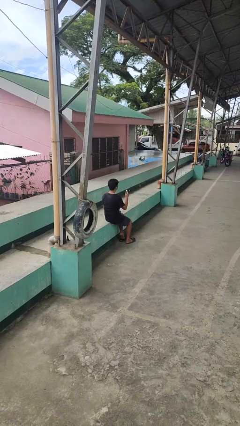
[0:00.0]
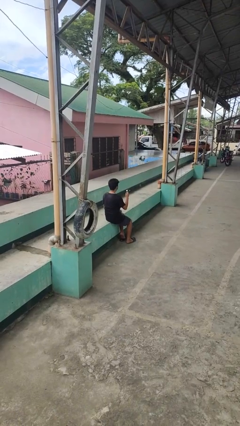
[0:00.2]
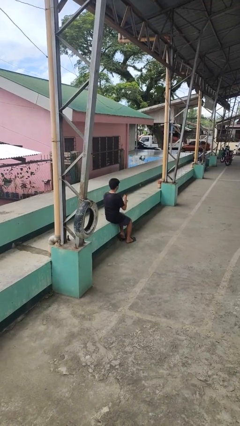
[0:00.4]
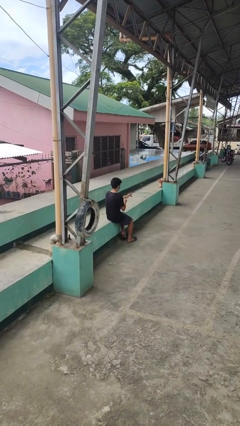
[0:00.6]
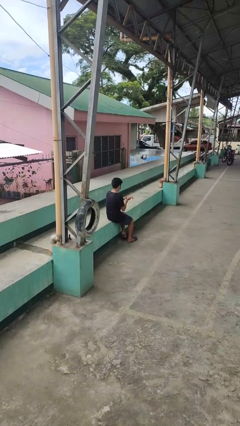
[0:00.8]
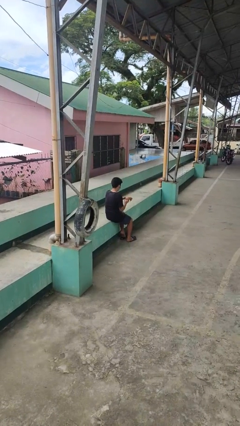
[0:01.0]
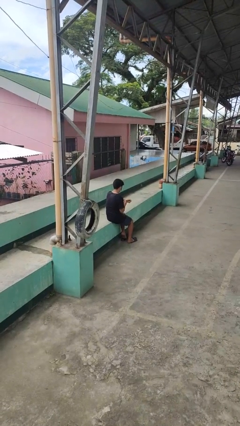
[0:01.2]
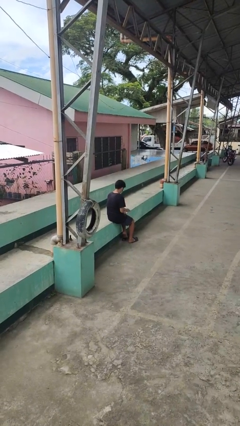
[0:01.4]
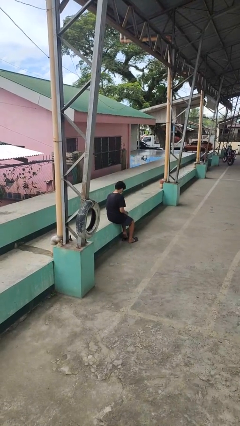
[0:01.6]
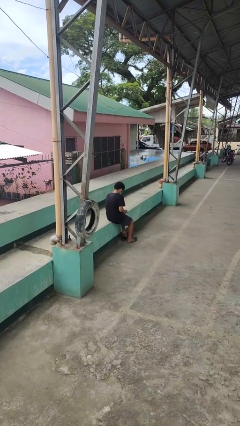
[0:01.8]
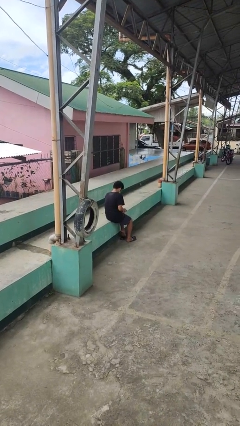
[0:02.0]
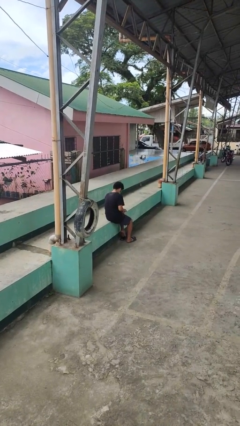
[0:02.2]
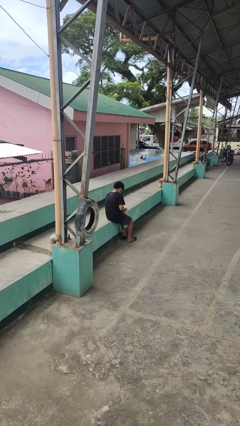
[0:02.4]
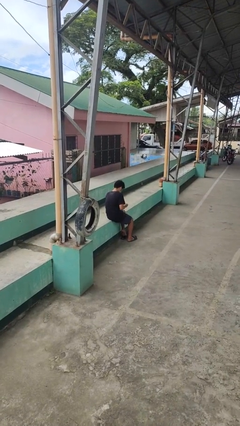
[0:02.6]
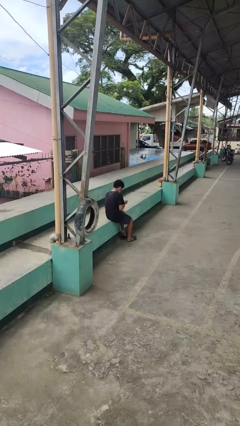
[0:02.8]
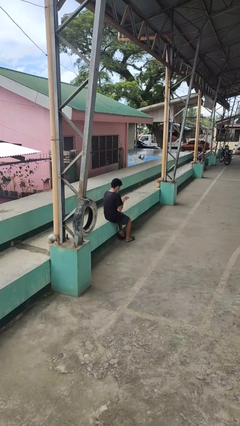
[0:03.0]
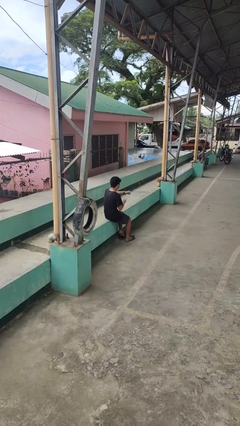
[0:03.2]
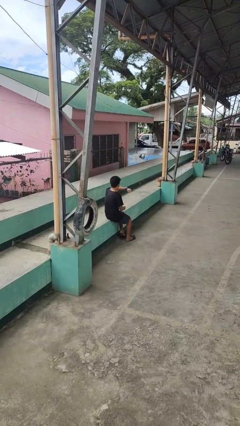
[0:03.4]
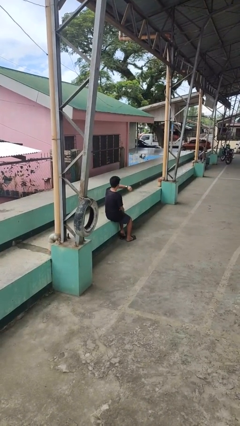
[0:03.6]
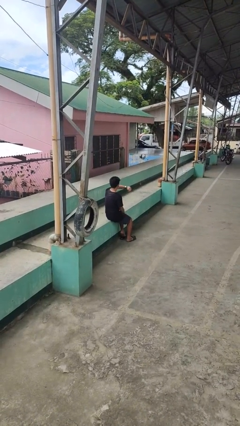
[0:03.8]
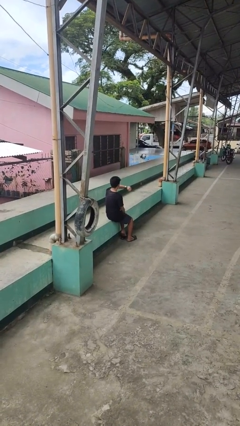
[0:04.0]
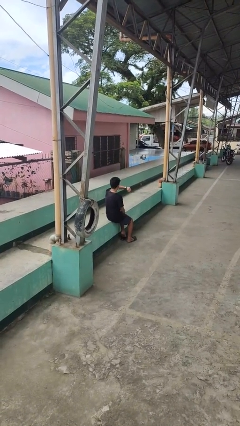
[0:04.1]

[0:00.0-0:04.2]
person puts on wristwatch

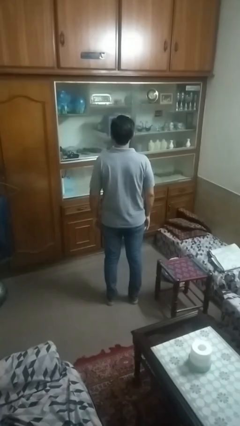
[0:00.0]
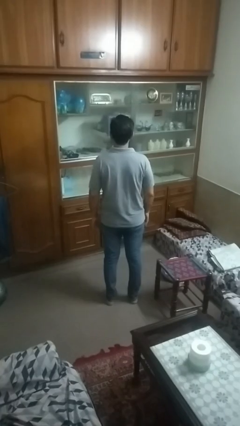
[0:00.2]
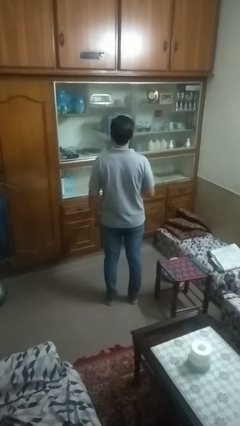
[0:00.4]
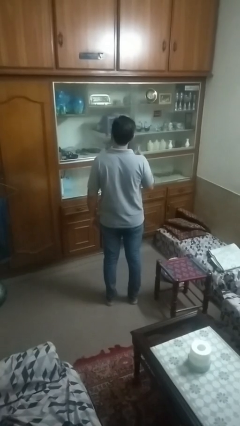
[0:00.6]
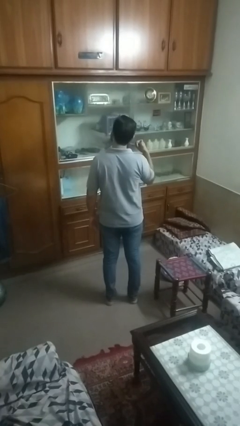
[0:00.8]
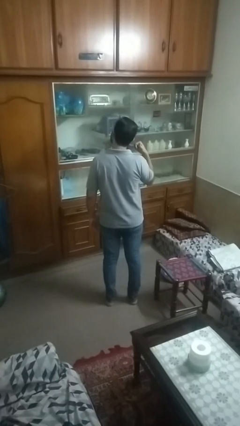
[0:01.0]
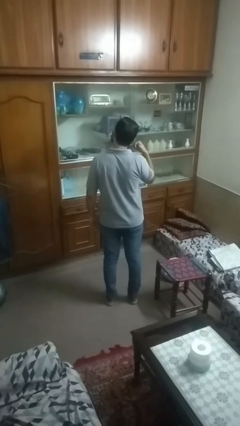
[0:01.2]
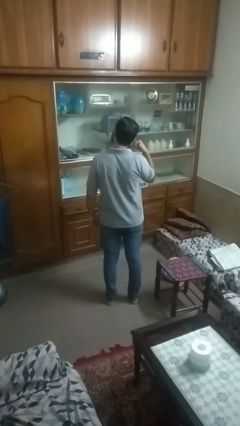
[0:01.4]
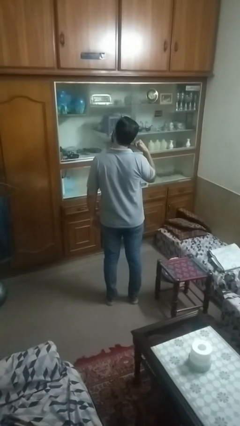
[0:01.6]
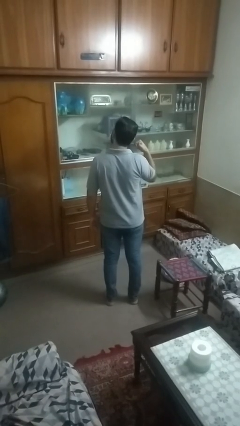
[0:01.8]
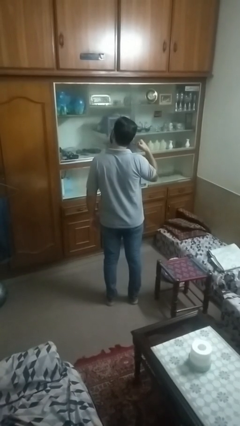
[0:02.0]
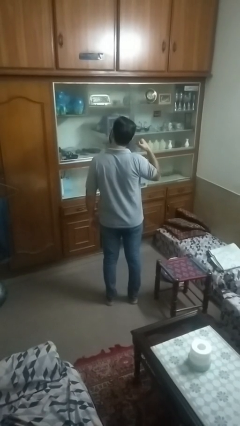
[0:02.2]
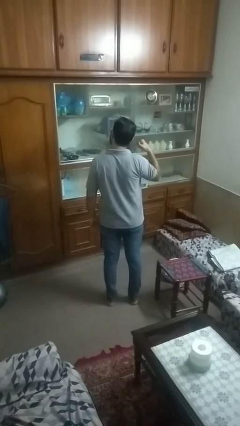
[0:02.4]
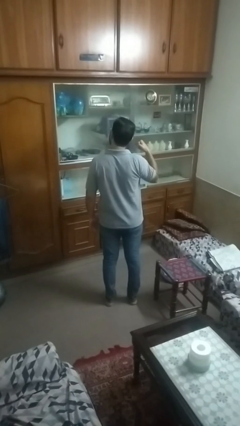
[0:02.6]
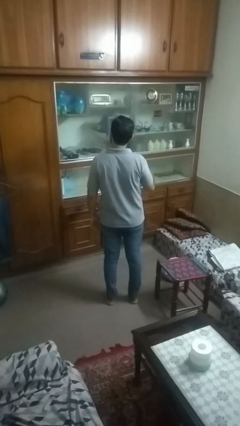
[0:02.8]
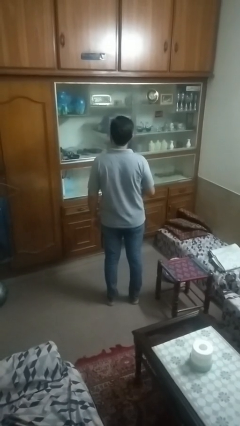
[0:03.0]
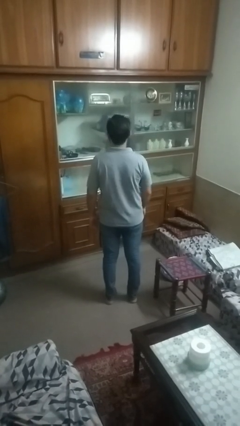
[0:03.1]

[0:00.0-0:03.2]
person gestures call me

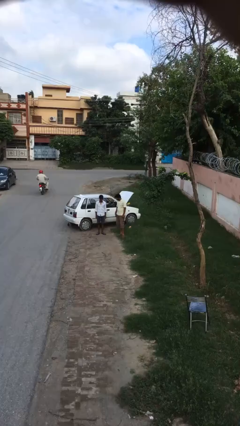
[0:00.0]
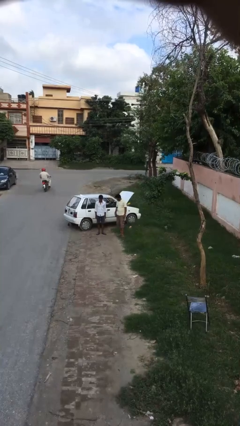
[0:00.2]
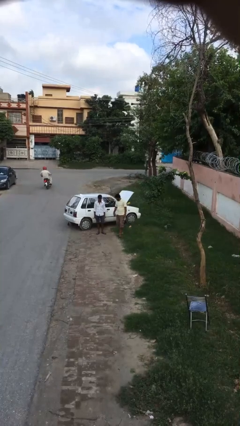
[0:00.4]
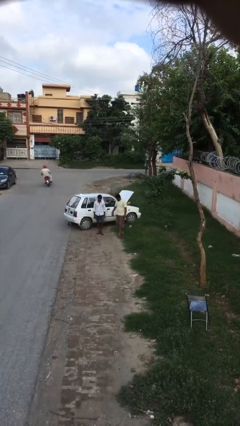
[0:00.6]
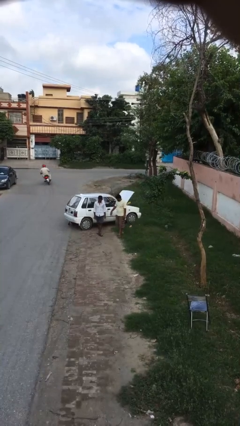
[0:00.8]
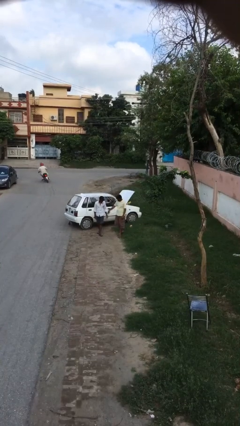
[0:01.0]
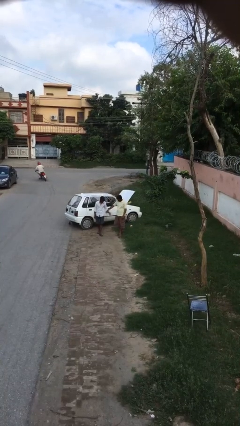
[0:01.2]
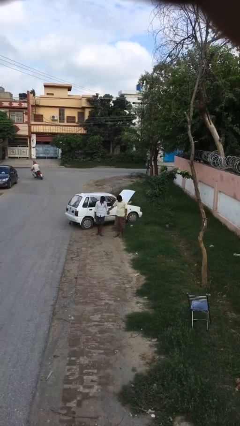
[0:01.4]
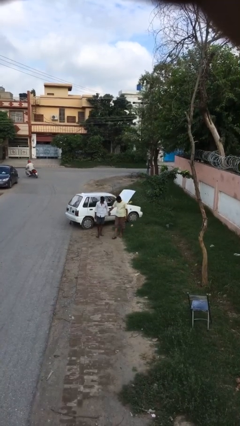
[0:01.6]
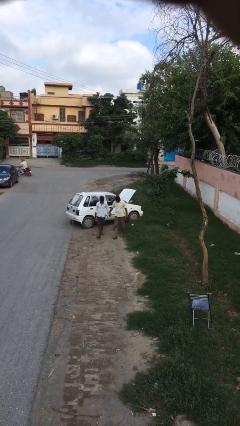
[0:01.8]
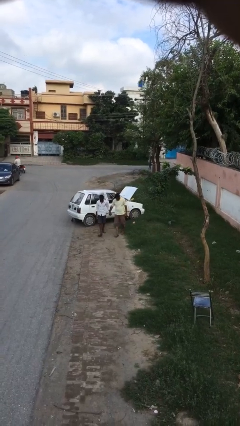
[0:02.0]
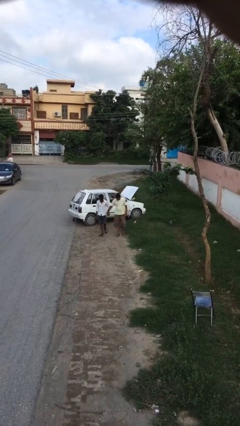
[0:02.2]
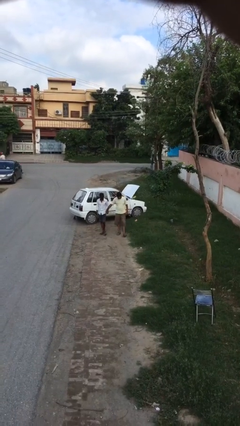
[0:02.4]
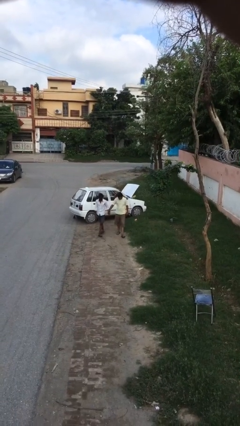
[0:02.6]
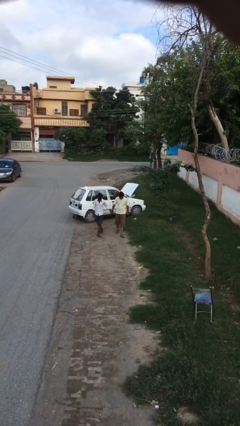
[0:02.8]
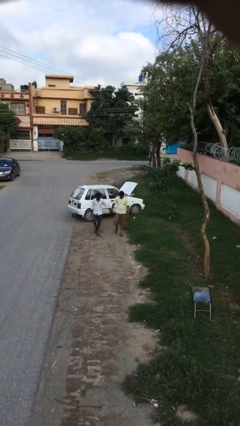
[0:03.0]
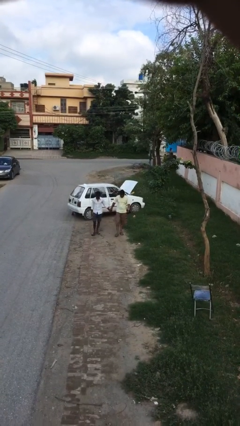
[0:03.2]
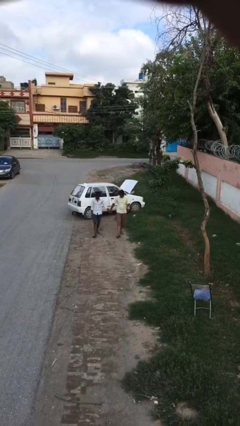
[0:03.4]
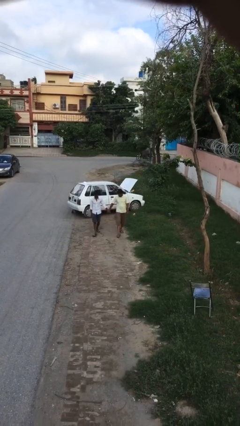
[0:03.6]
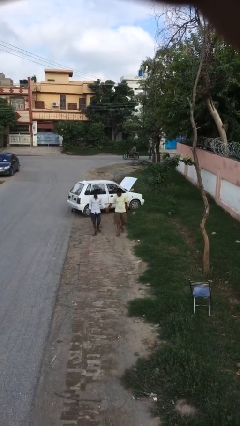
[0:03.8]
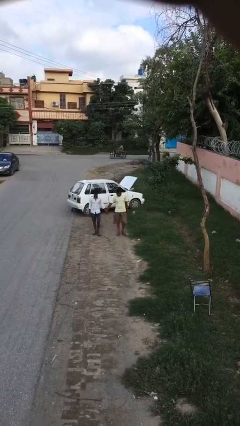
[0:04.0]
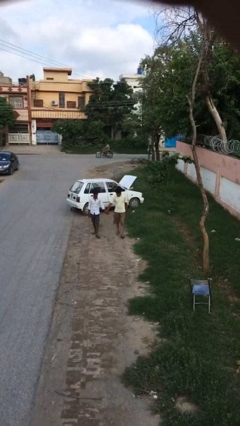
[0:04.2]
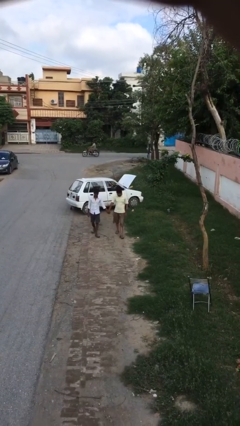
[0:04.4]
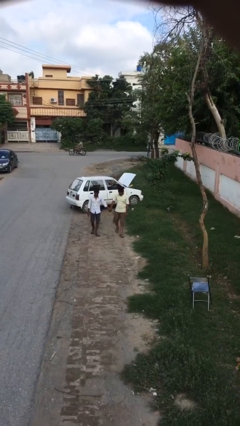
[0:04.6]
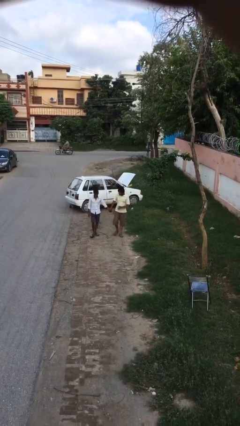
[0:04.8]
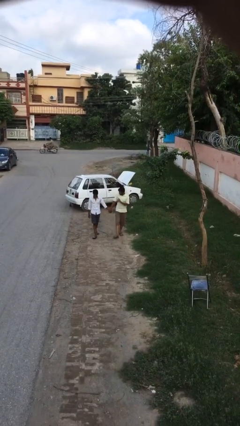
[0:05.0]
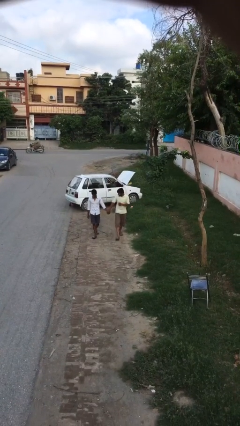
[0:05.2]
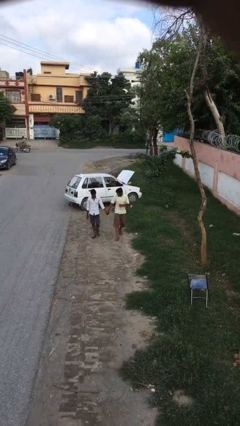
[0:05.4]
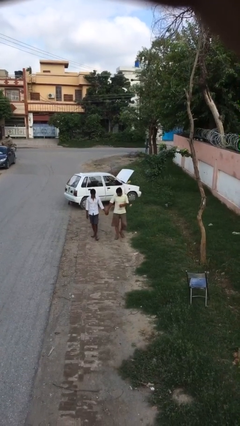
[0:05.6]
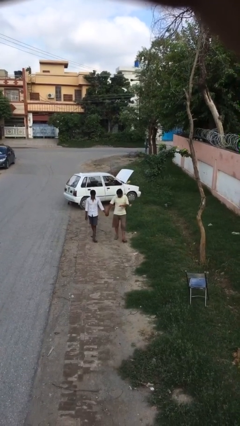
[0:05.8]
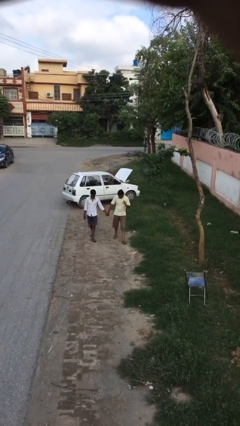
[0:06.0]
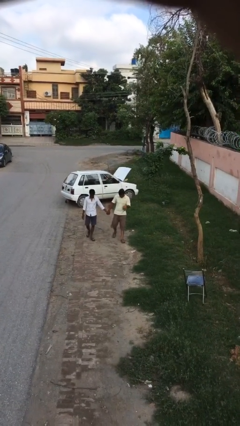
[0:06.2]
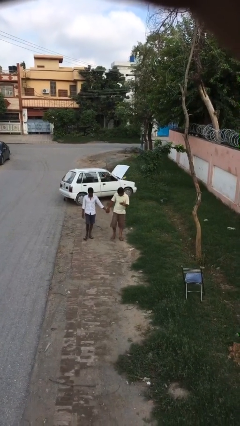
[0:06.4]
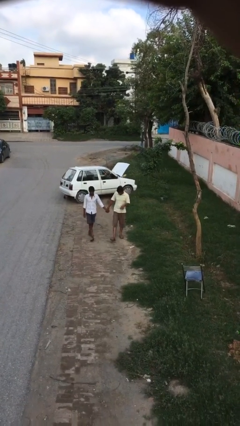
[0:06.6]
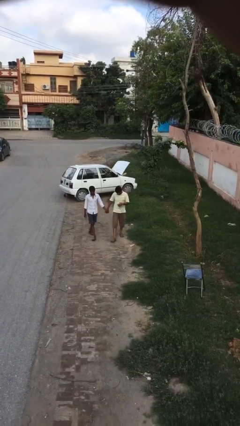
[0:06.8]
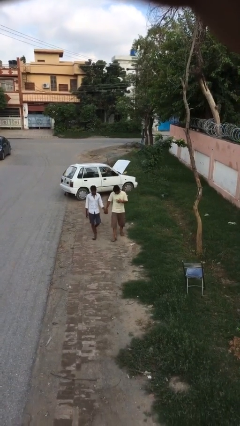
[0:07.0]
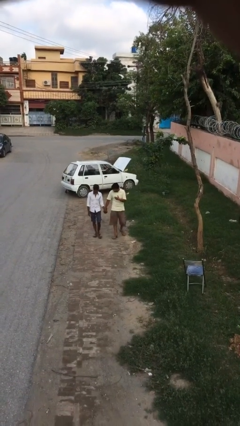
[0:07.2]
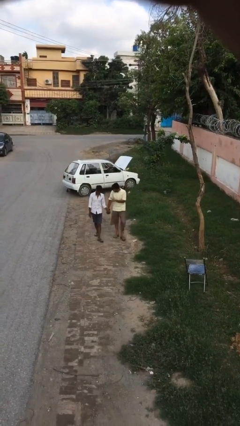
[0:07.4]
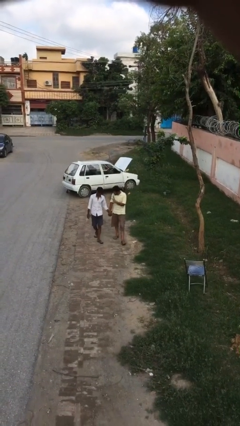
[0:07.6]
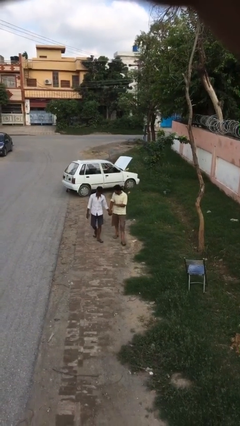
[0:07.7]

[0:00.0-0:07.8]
person holds hand

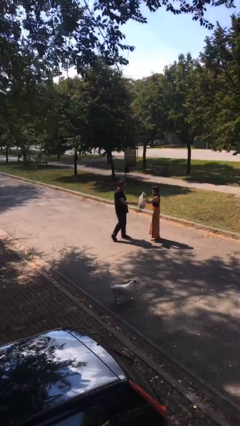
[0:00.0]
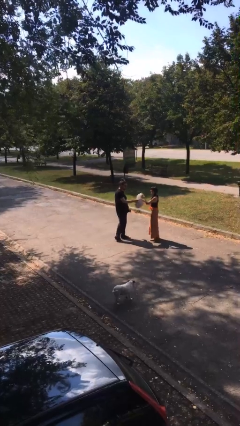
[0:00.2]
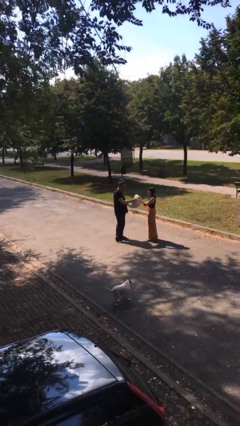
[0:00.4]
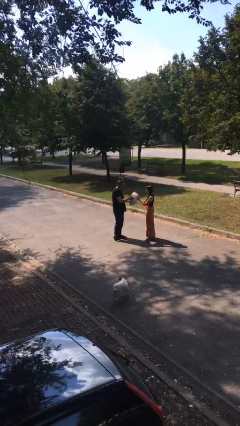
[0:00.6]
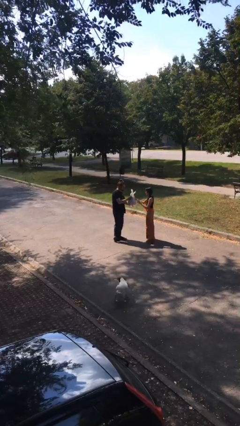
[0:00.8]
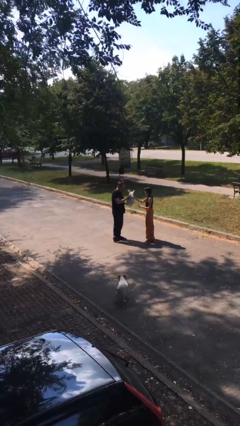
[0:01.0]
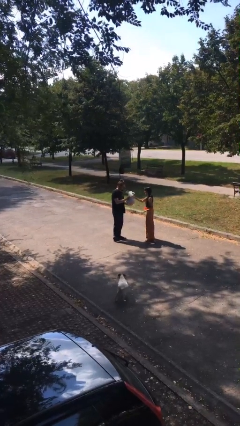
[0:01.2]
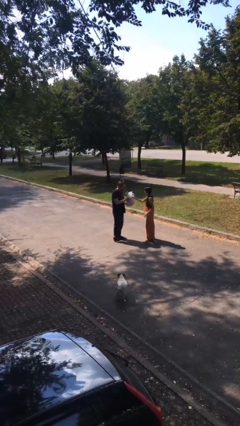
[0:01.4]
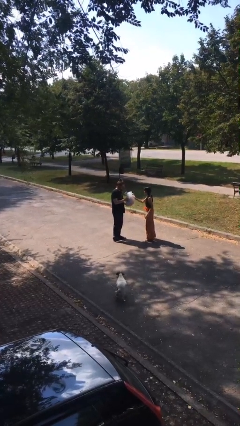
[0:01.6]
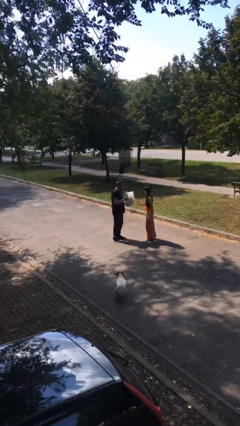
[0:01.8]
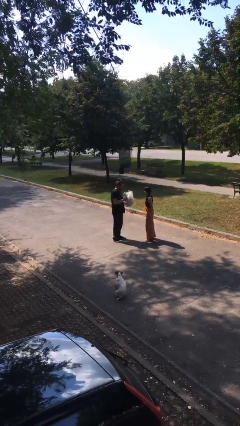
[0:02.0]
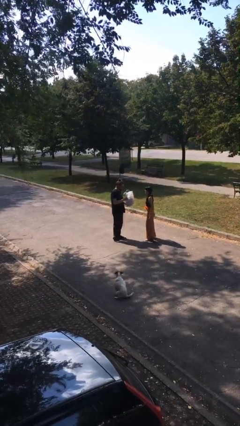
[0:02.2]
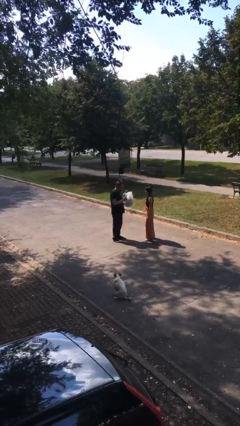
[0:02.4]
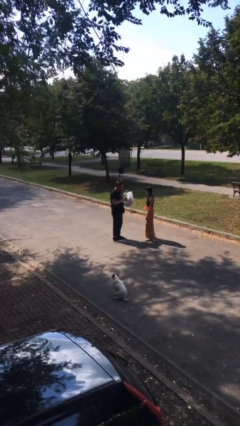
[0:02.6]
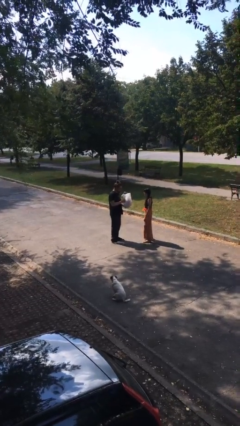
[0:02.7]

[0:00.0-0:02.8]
person transfers object to person
